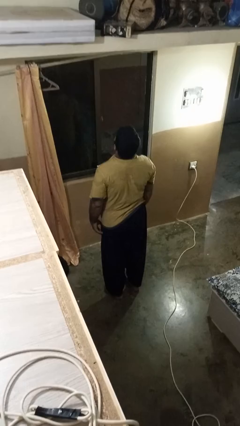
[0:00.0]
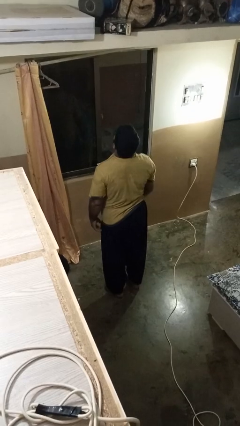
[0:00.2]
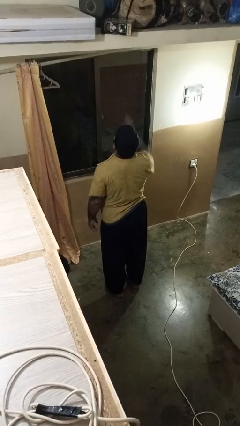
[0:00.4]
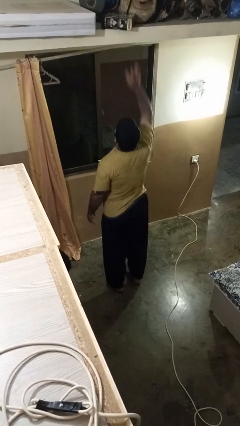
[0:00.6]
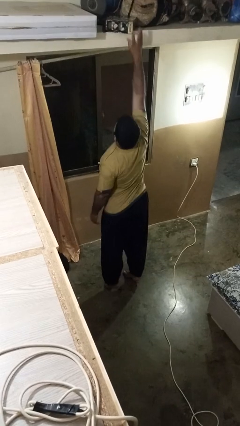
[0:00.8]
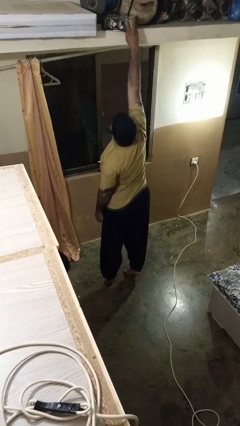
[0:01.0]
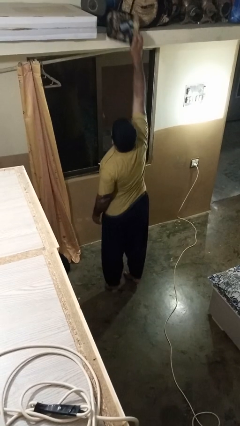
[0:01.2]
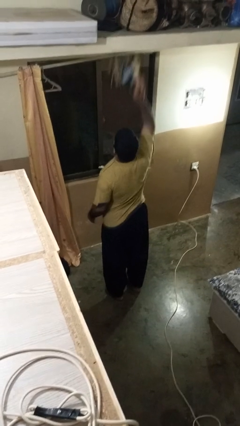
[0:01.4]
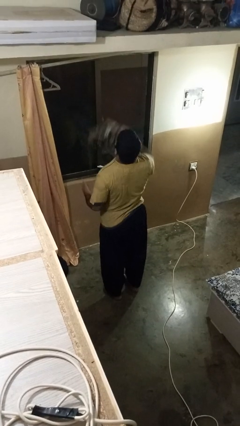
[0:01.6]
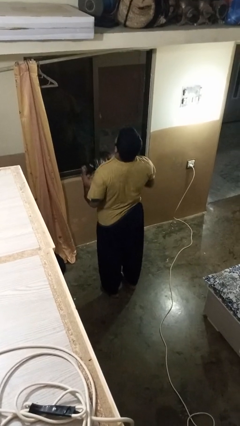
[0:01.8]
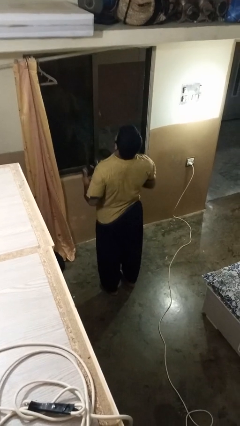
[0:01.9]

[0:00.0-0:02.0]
person picks up object from shelf

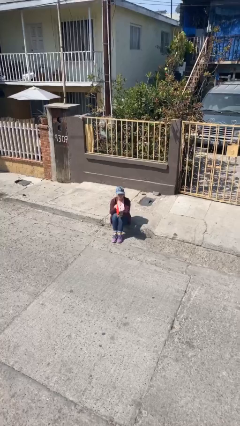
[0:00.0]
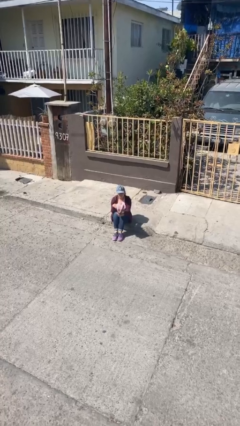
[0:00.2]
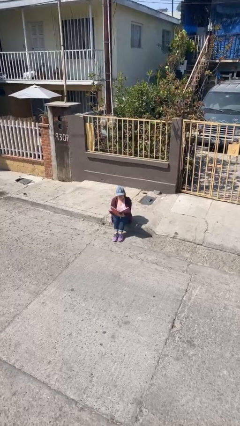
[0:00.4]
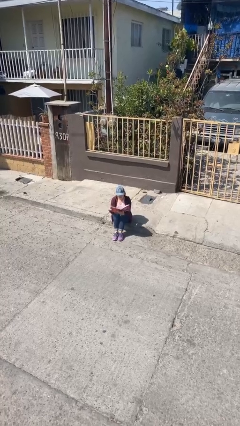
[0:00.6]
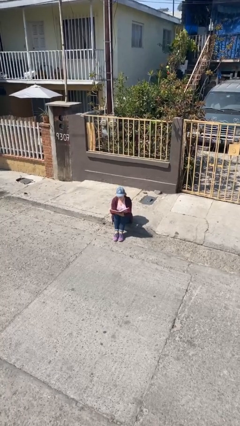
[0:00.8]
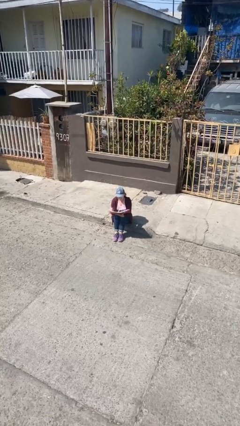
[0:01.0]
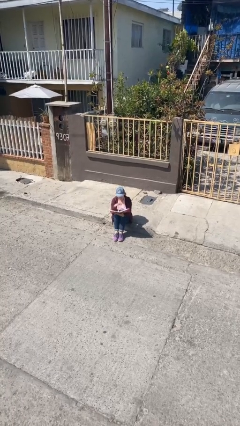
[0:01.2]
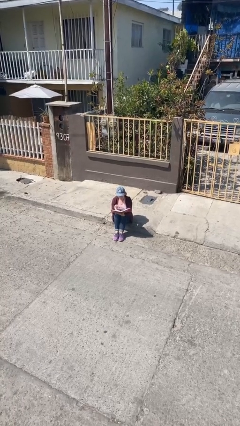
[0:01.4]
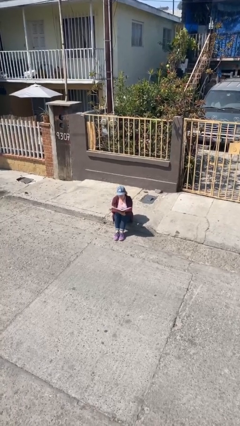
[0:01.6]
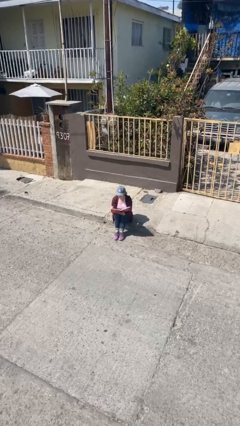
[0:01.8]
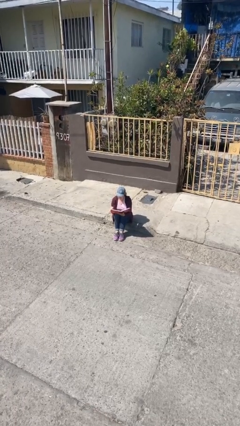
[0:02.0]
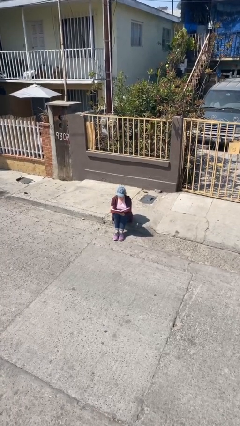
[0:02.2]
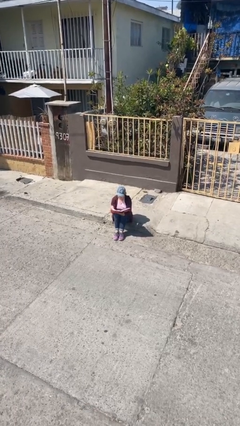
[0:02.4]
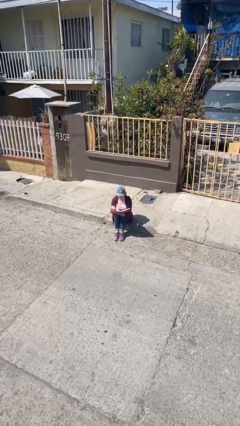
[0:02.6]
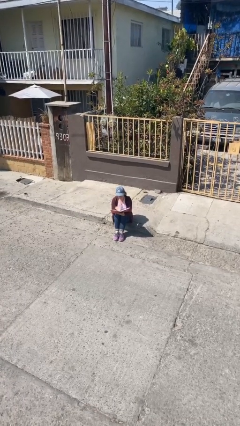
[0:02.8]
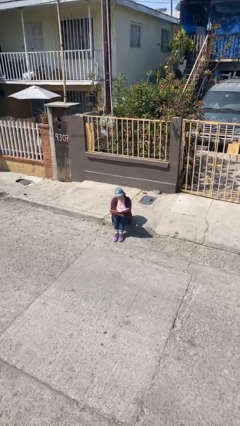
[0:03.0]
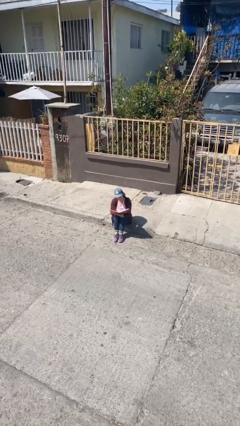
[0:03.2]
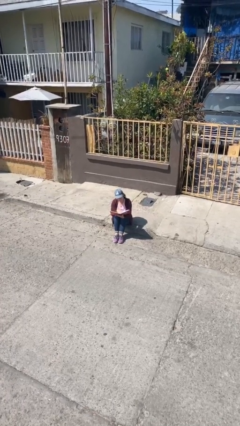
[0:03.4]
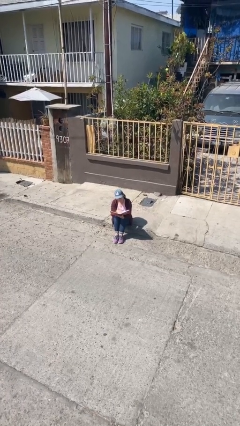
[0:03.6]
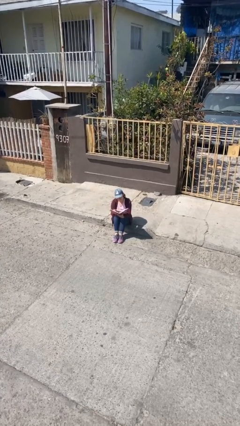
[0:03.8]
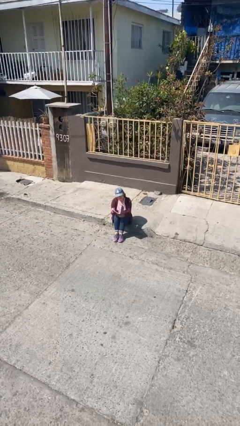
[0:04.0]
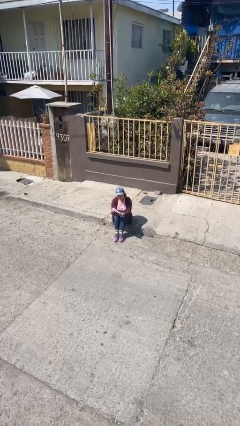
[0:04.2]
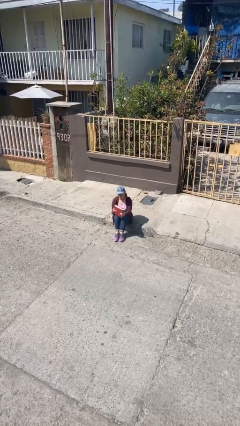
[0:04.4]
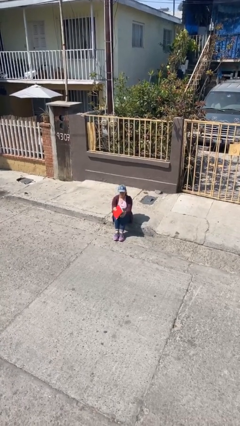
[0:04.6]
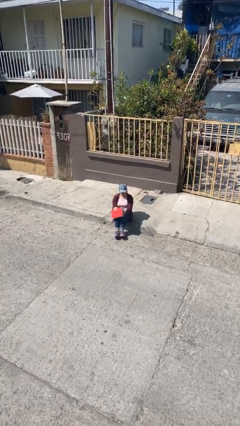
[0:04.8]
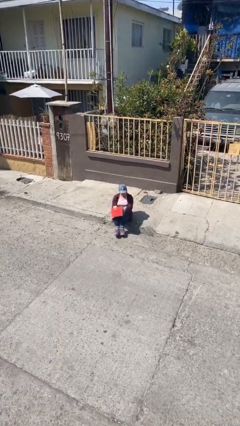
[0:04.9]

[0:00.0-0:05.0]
person reads document

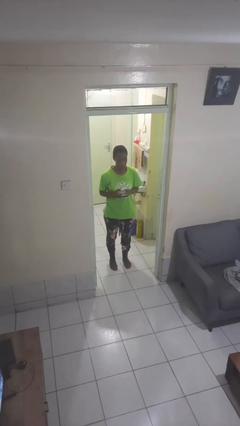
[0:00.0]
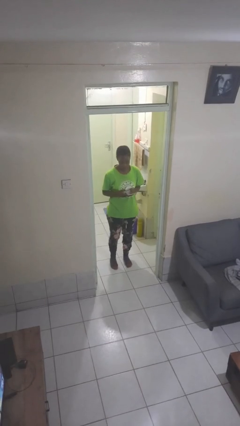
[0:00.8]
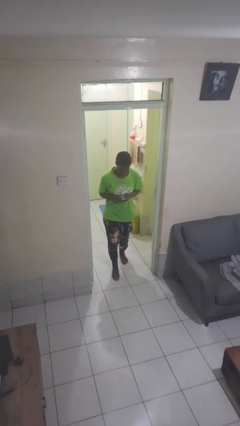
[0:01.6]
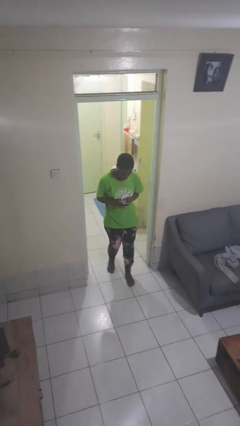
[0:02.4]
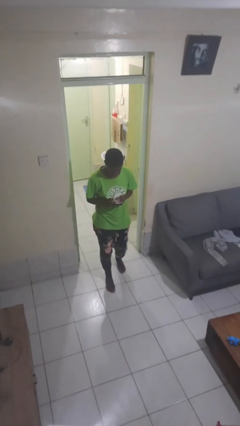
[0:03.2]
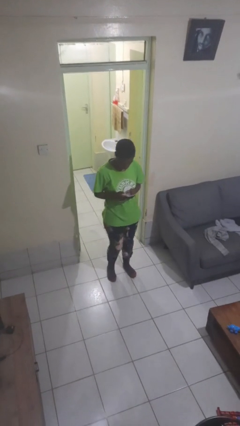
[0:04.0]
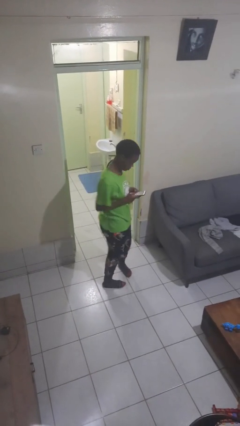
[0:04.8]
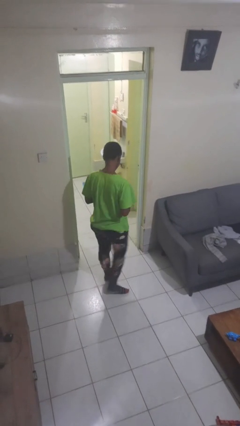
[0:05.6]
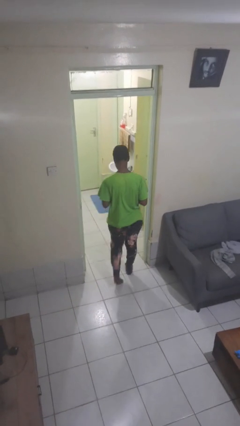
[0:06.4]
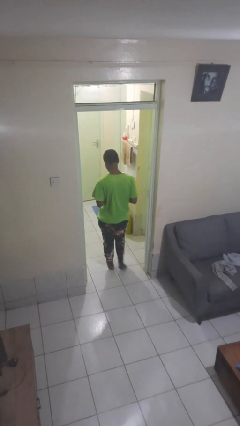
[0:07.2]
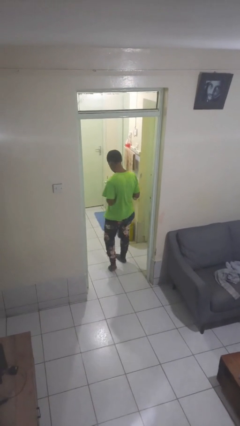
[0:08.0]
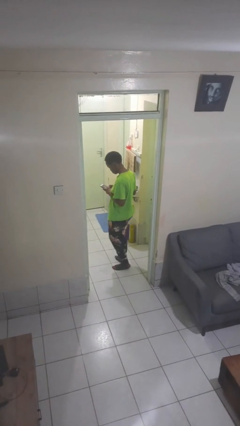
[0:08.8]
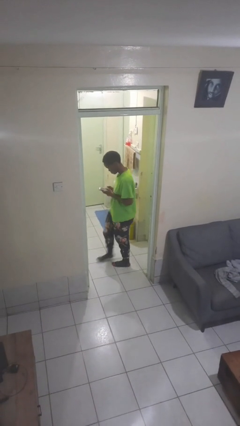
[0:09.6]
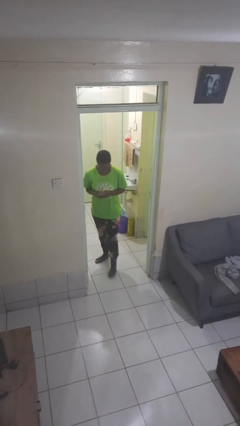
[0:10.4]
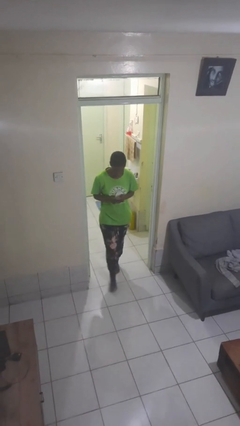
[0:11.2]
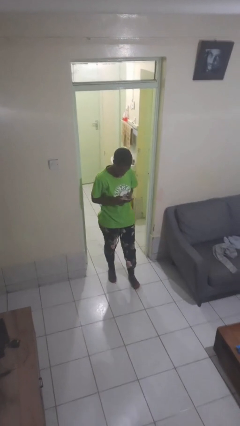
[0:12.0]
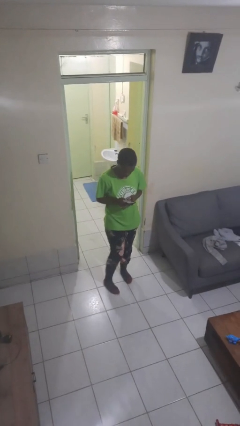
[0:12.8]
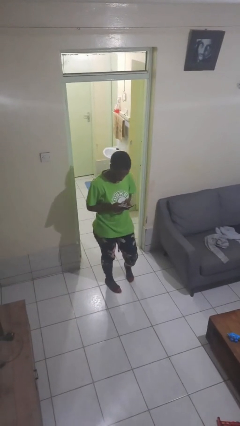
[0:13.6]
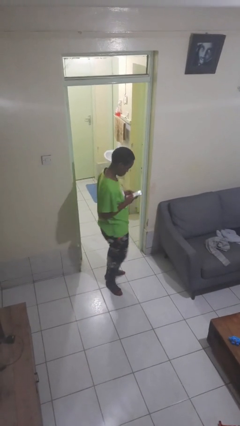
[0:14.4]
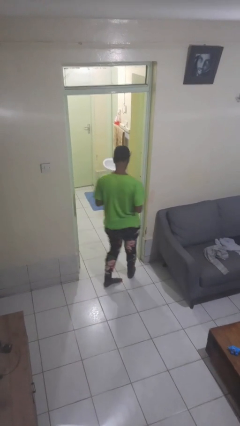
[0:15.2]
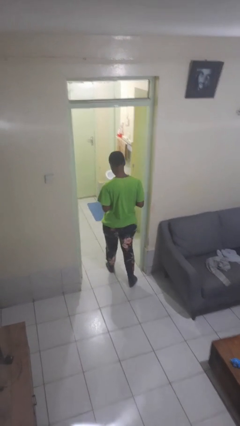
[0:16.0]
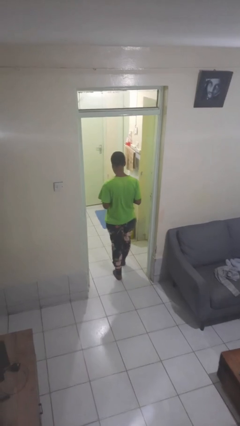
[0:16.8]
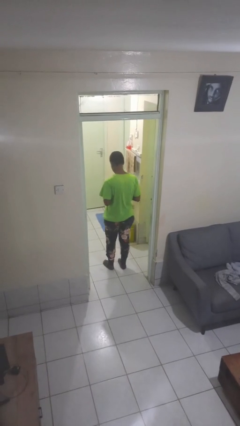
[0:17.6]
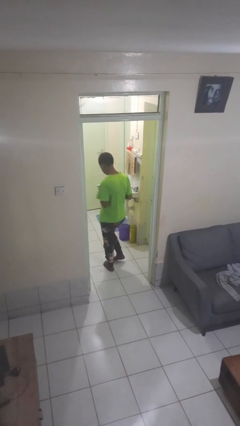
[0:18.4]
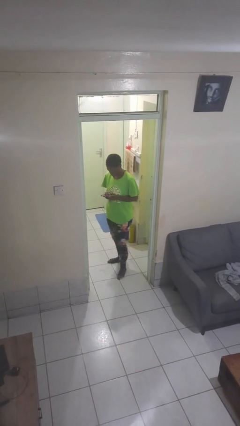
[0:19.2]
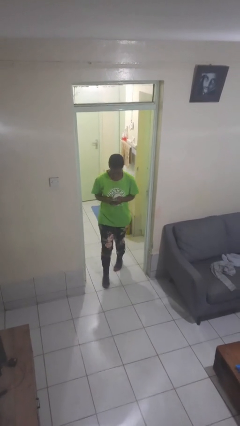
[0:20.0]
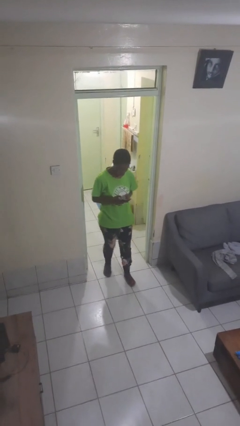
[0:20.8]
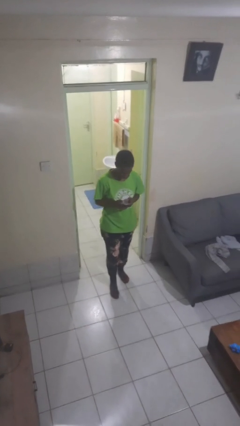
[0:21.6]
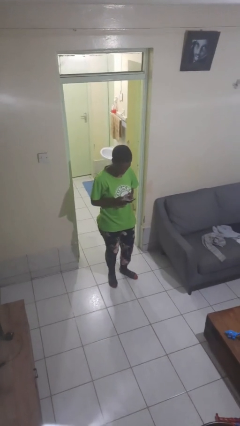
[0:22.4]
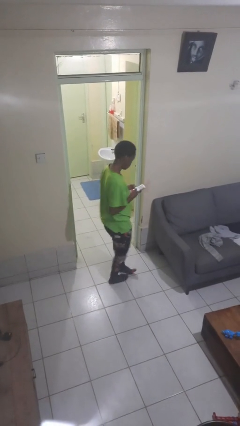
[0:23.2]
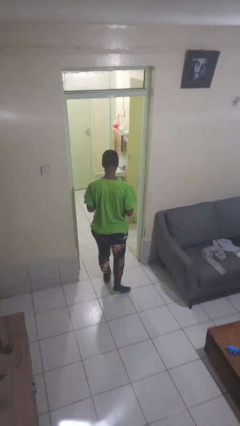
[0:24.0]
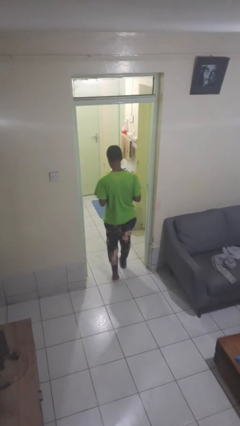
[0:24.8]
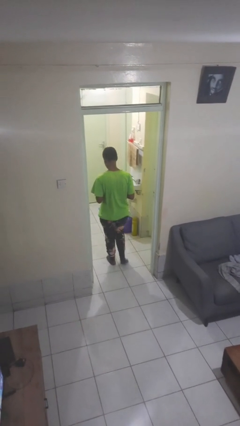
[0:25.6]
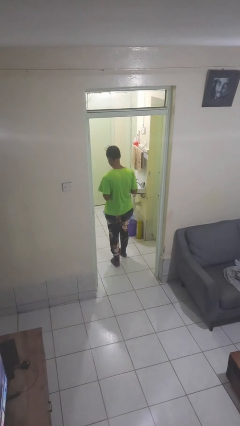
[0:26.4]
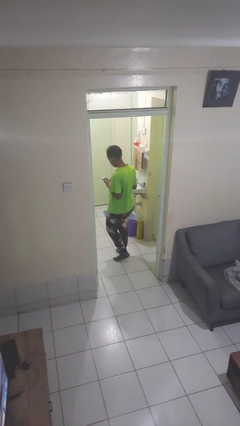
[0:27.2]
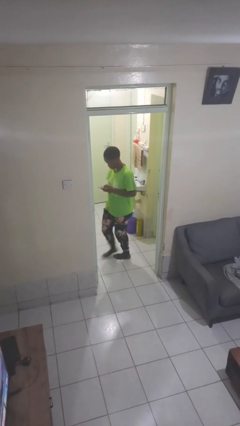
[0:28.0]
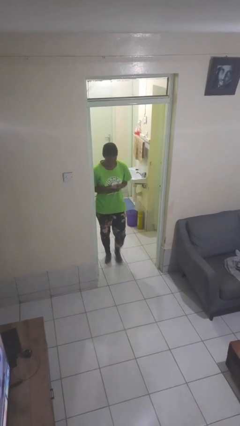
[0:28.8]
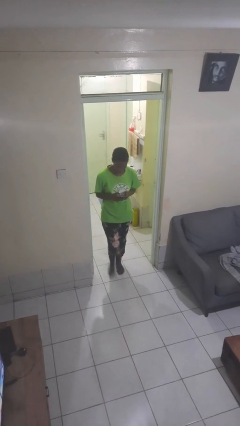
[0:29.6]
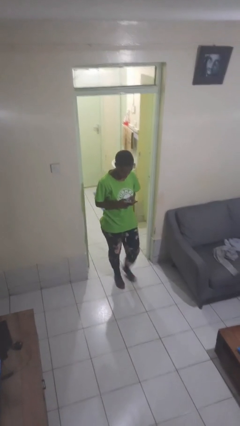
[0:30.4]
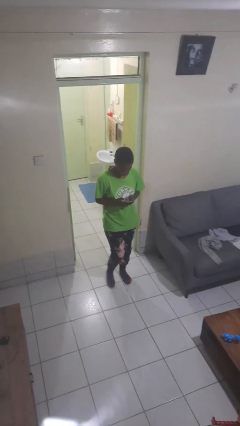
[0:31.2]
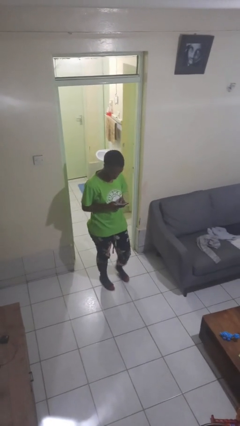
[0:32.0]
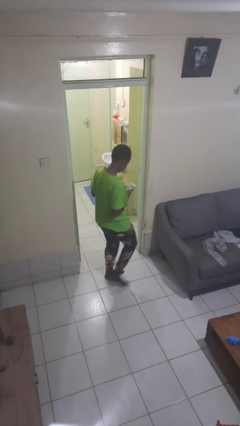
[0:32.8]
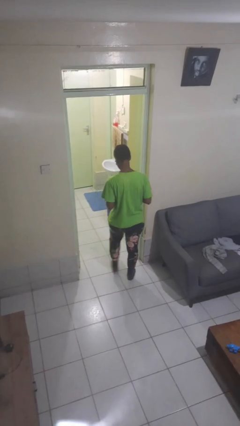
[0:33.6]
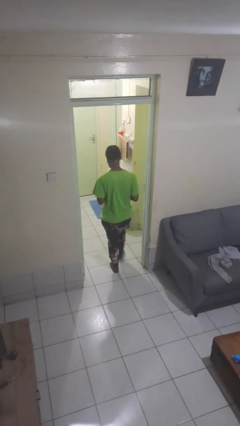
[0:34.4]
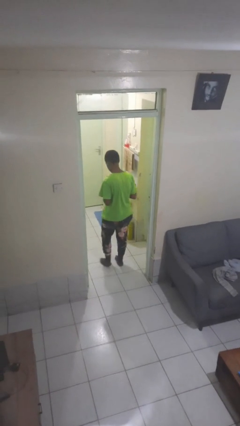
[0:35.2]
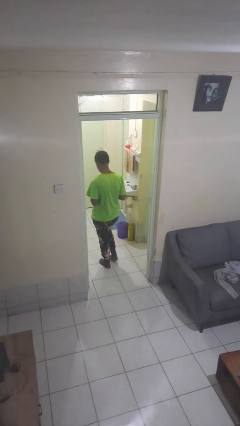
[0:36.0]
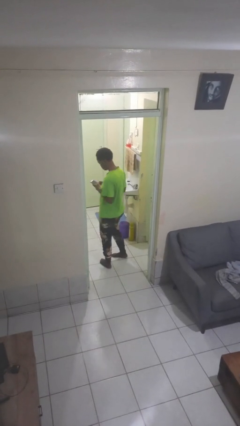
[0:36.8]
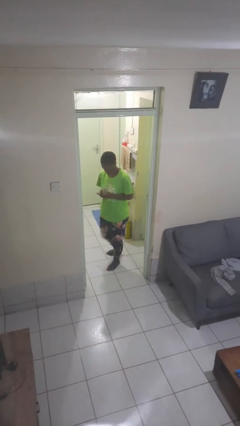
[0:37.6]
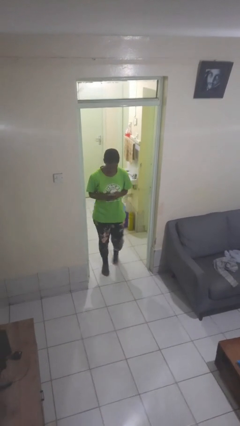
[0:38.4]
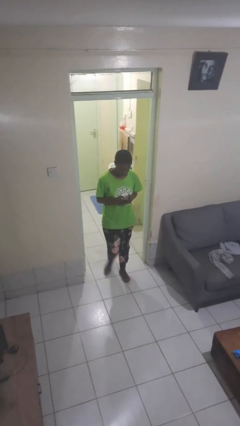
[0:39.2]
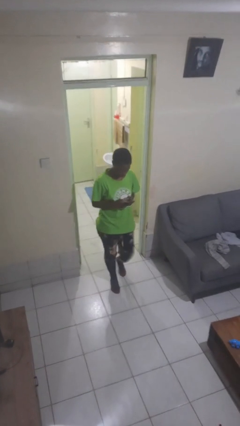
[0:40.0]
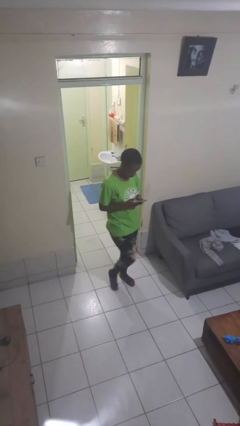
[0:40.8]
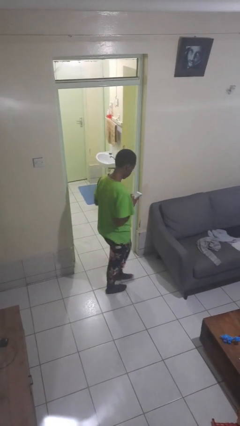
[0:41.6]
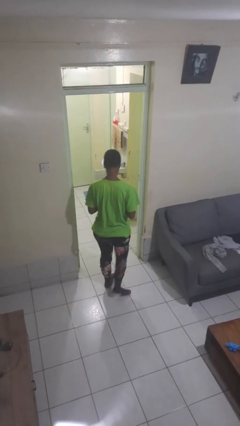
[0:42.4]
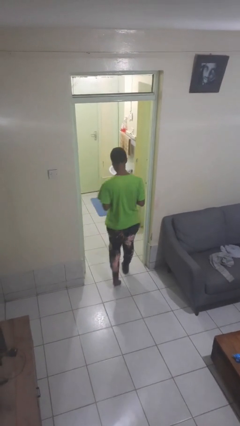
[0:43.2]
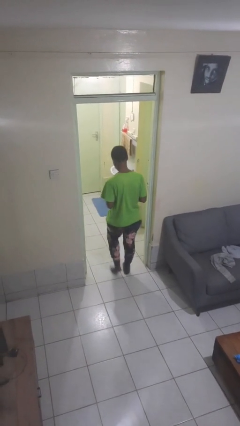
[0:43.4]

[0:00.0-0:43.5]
person texts on phone
